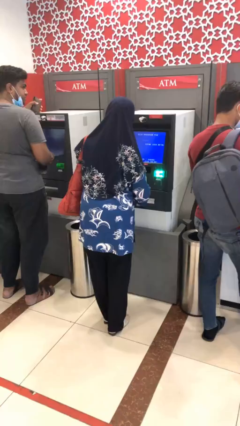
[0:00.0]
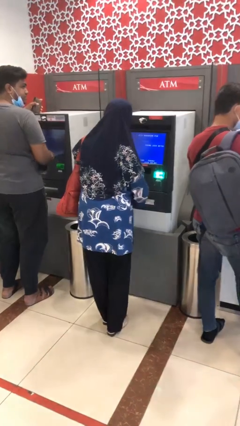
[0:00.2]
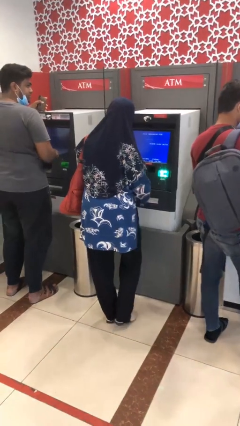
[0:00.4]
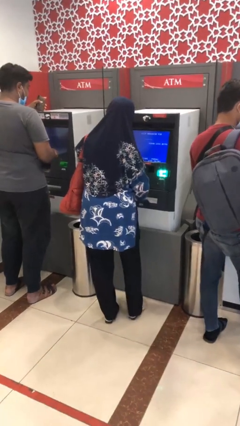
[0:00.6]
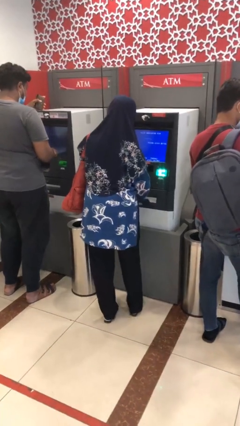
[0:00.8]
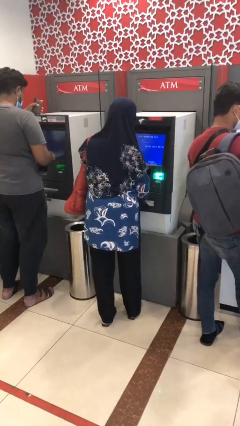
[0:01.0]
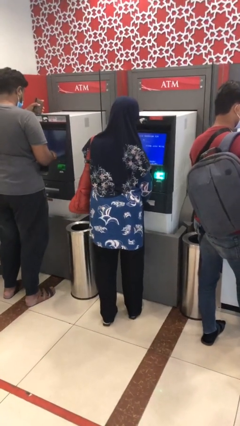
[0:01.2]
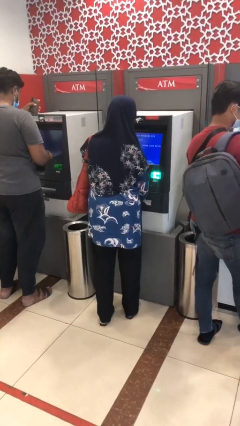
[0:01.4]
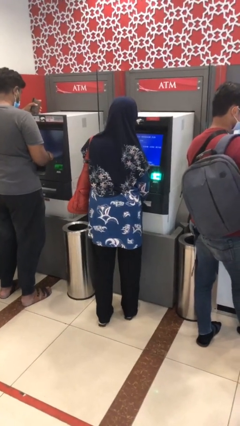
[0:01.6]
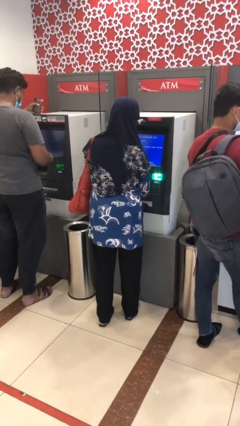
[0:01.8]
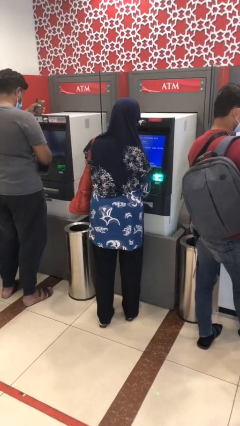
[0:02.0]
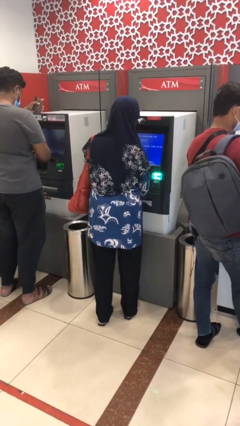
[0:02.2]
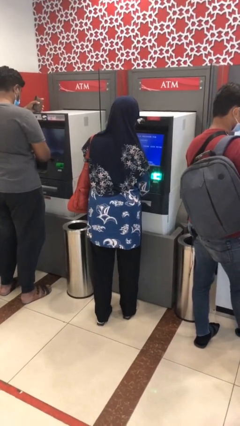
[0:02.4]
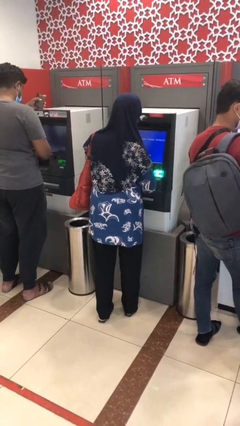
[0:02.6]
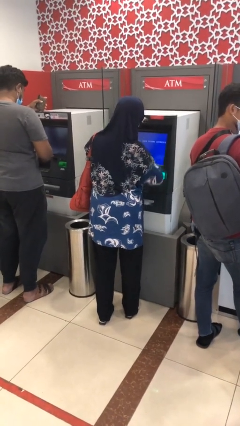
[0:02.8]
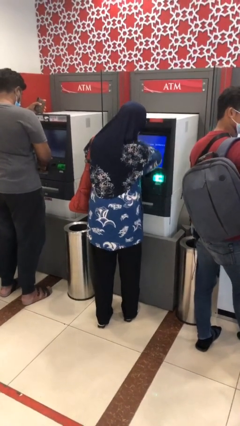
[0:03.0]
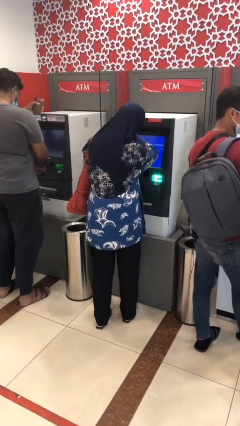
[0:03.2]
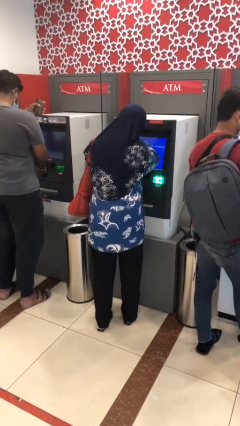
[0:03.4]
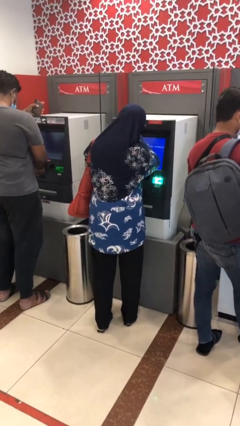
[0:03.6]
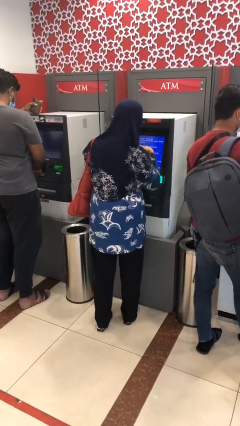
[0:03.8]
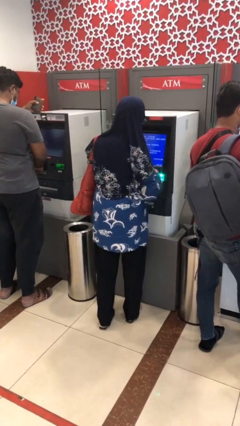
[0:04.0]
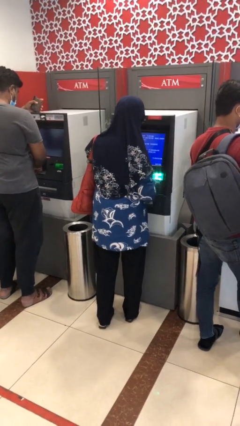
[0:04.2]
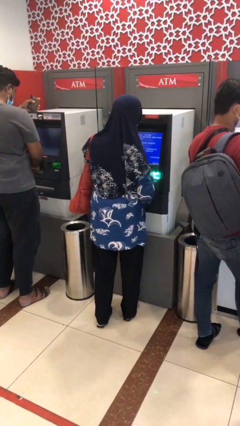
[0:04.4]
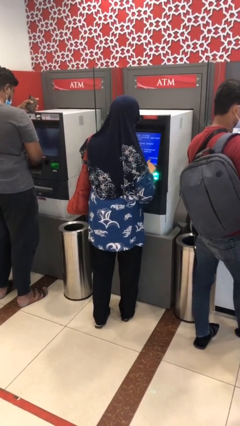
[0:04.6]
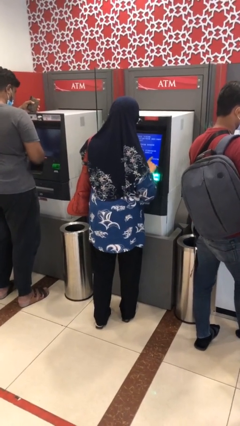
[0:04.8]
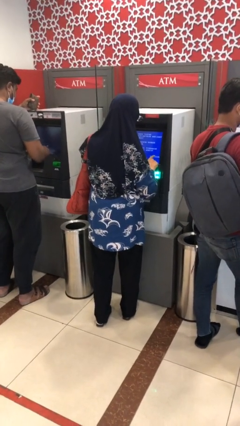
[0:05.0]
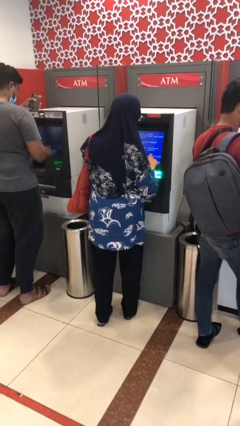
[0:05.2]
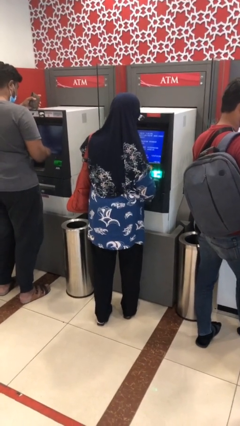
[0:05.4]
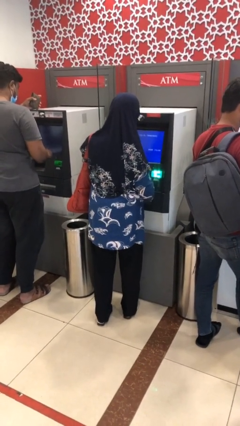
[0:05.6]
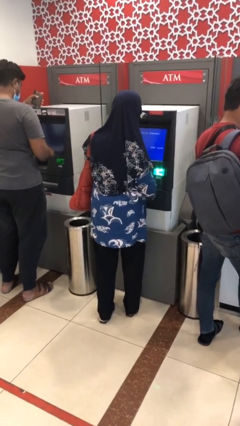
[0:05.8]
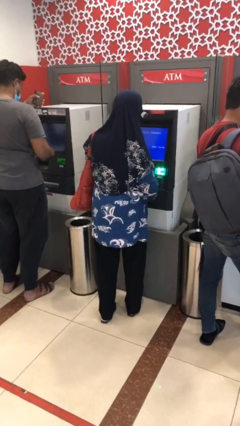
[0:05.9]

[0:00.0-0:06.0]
person purchases from machine

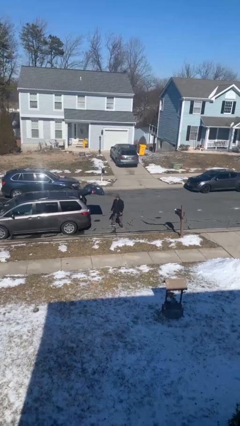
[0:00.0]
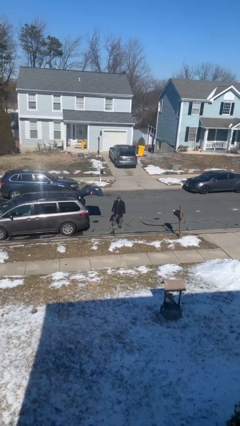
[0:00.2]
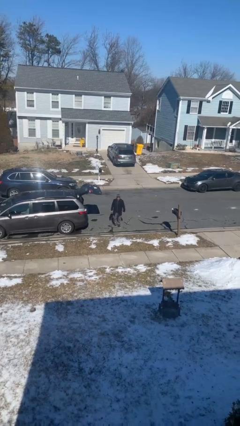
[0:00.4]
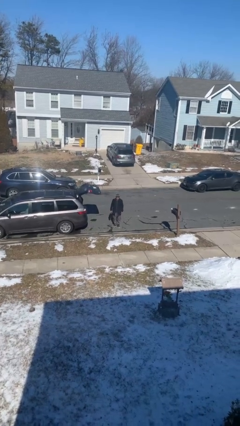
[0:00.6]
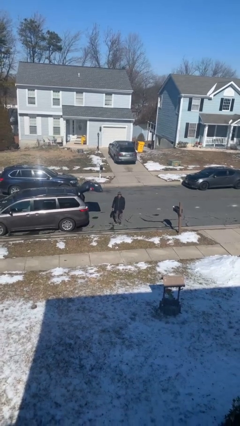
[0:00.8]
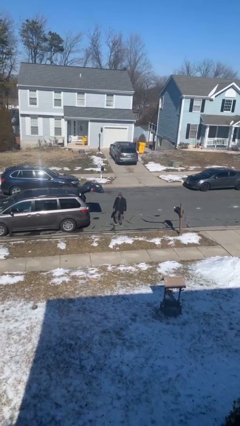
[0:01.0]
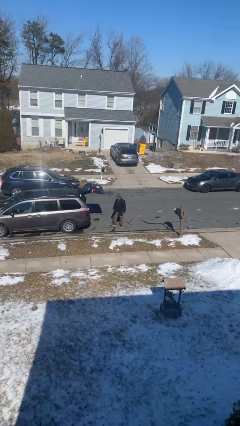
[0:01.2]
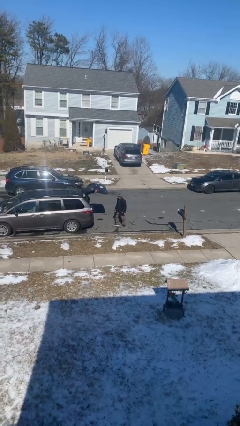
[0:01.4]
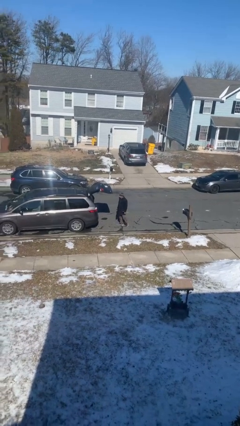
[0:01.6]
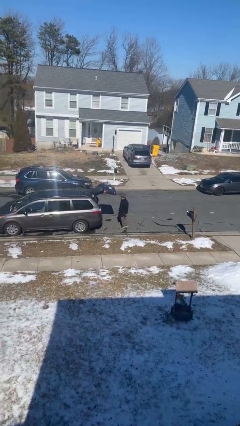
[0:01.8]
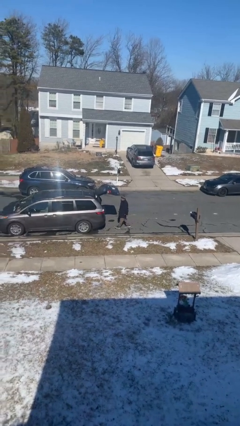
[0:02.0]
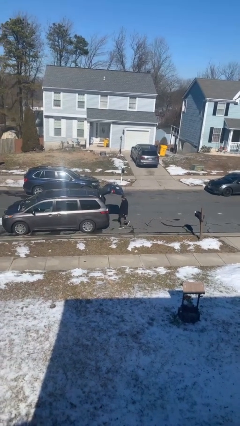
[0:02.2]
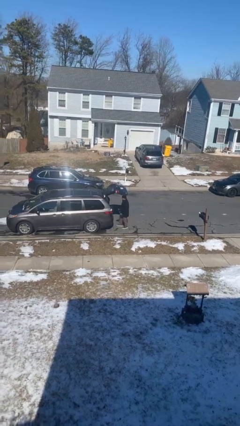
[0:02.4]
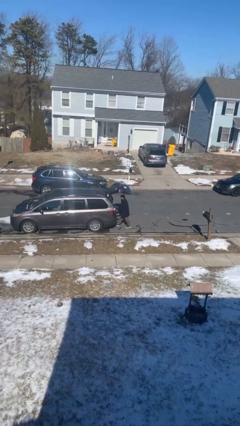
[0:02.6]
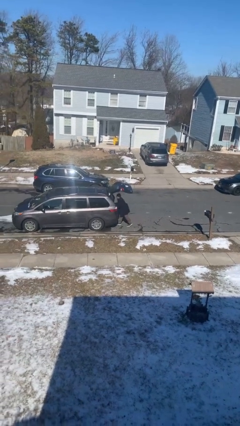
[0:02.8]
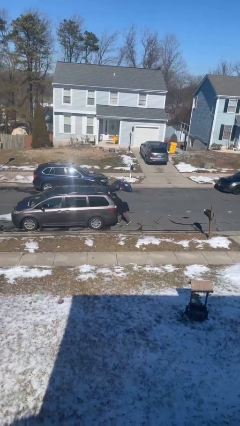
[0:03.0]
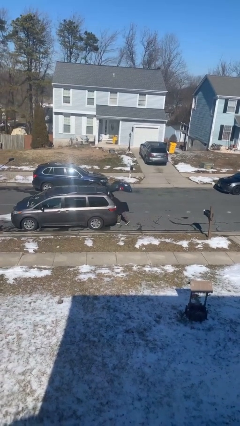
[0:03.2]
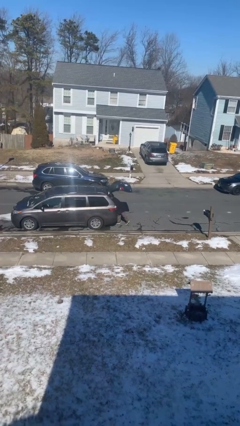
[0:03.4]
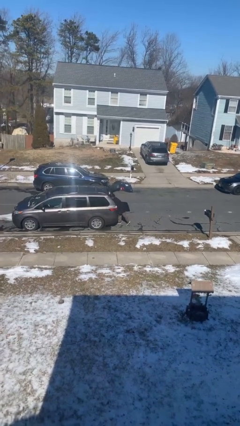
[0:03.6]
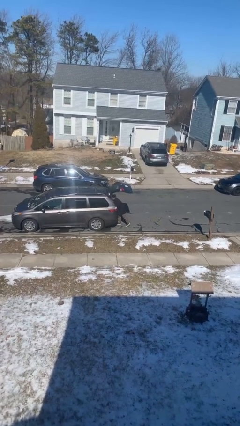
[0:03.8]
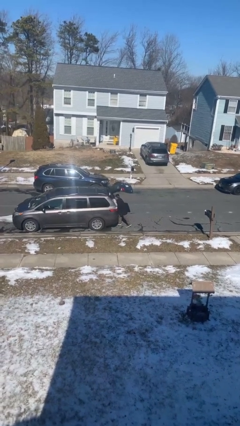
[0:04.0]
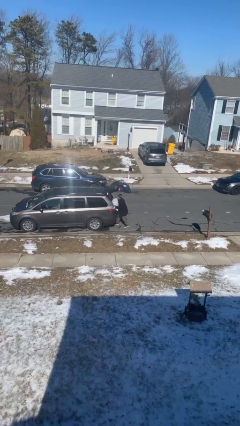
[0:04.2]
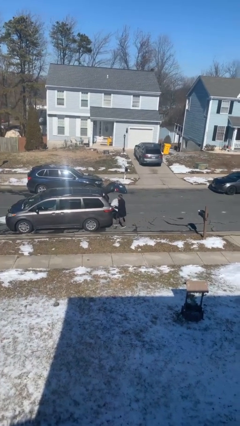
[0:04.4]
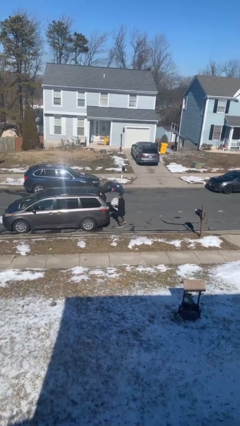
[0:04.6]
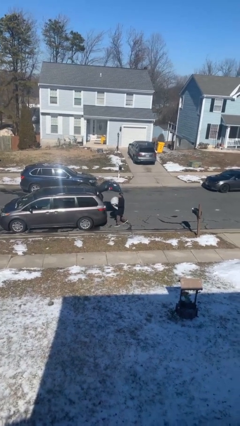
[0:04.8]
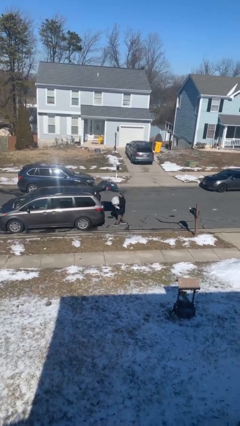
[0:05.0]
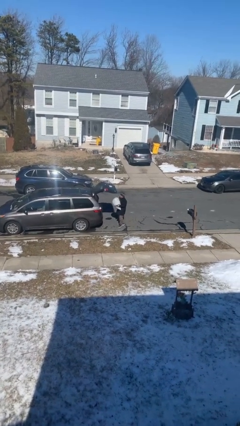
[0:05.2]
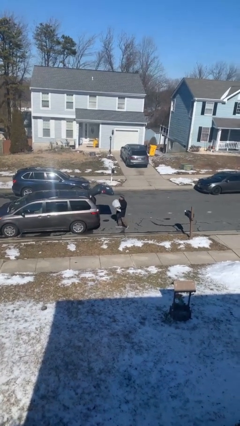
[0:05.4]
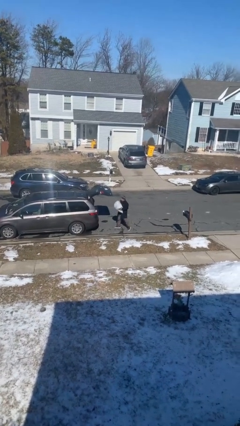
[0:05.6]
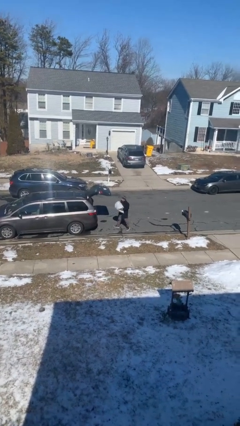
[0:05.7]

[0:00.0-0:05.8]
person unloads car

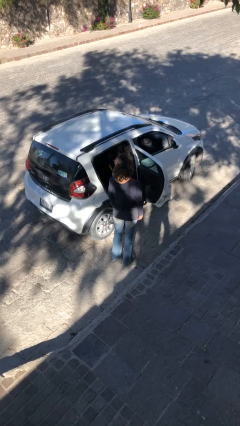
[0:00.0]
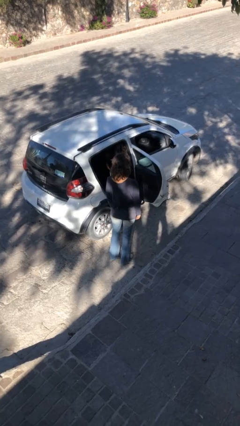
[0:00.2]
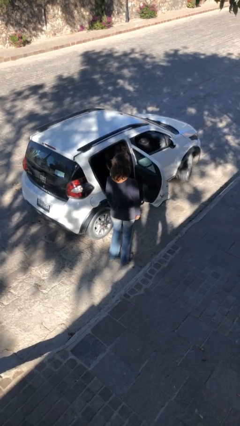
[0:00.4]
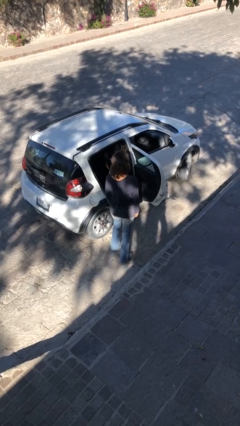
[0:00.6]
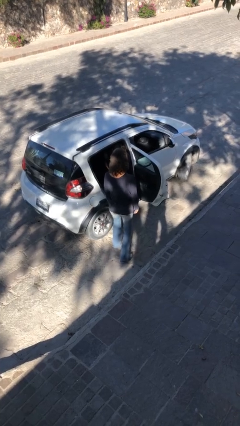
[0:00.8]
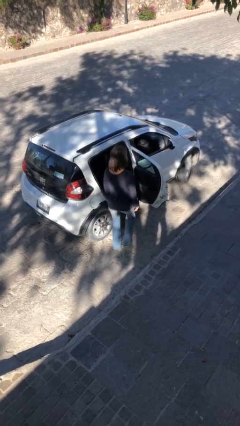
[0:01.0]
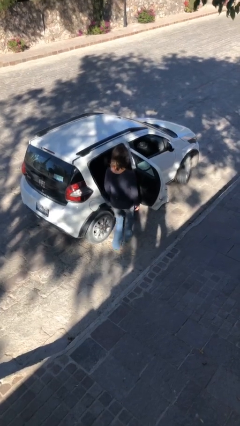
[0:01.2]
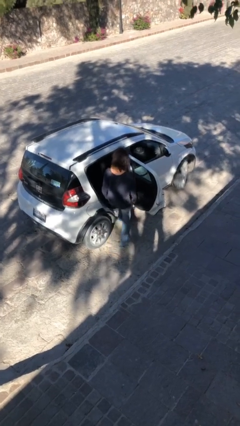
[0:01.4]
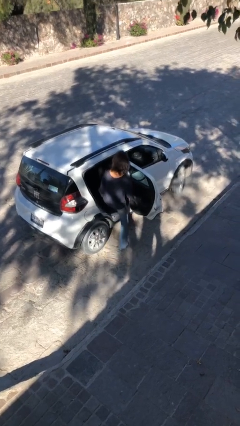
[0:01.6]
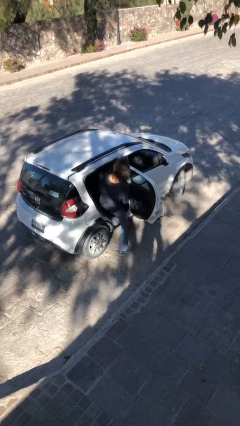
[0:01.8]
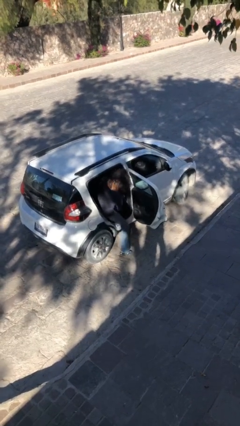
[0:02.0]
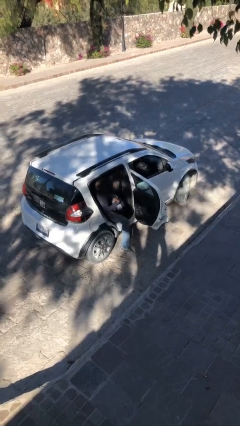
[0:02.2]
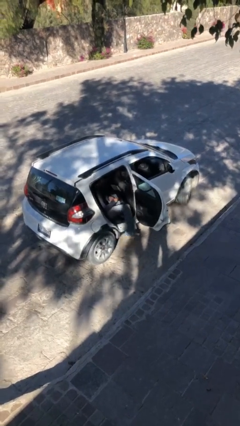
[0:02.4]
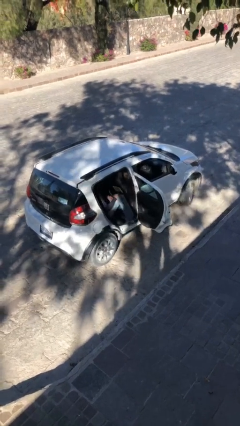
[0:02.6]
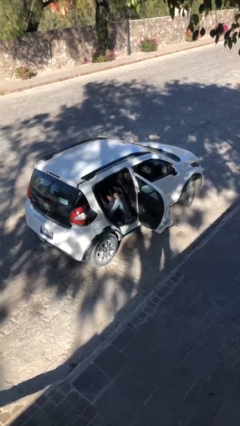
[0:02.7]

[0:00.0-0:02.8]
person enters car

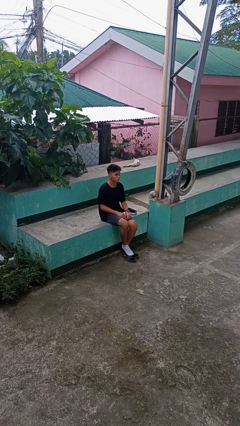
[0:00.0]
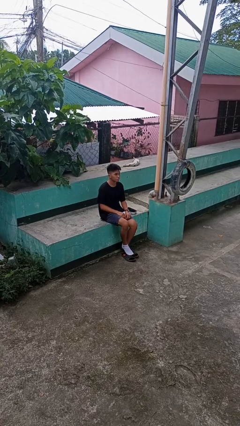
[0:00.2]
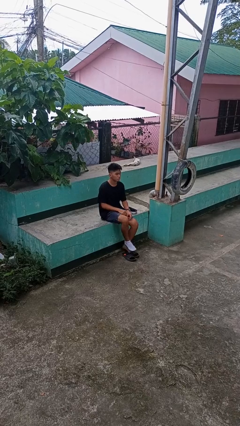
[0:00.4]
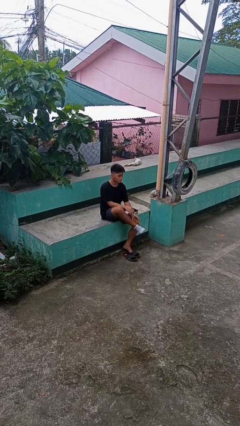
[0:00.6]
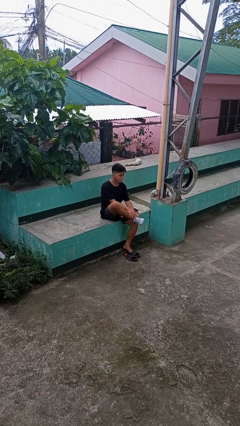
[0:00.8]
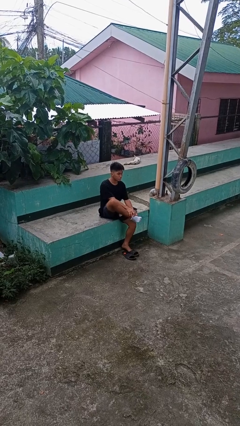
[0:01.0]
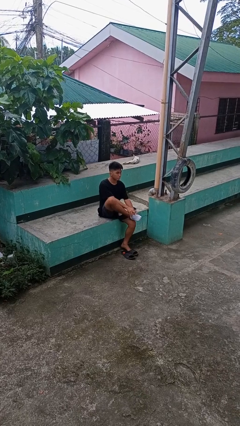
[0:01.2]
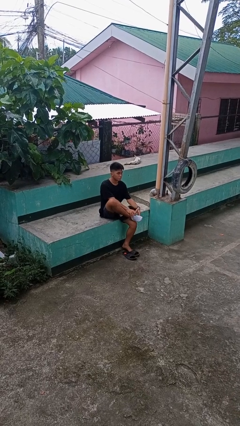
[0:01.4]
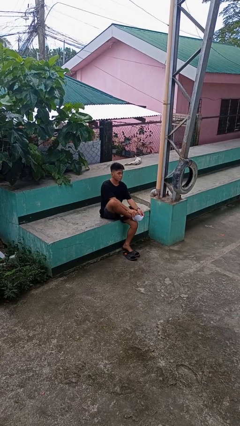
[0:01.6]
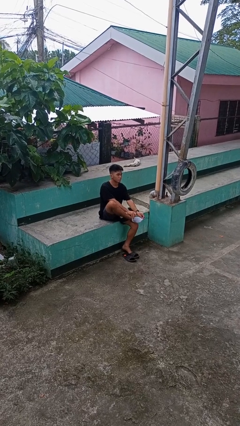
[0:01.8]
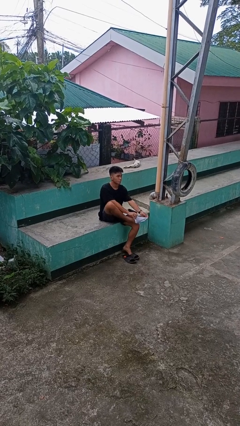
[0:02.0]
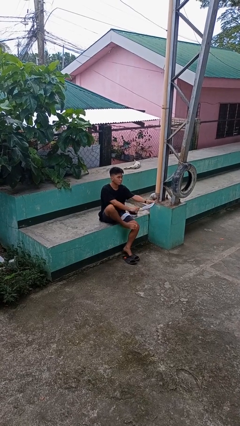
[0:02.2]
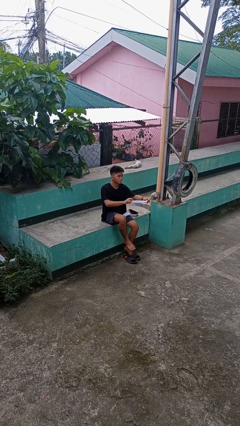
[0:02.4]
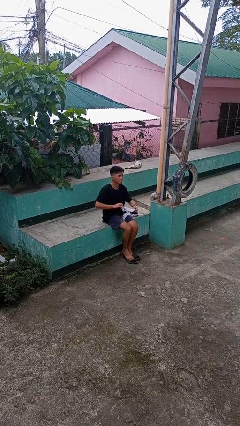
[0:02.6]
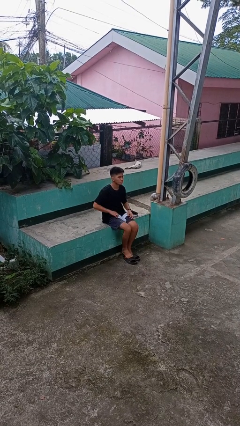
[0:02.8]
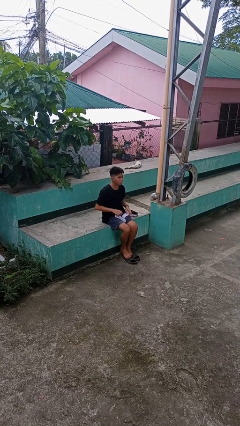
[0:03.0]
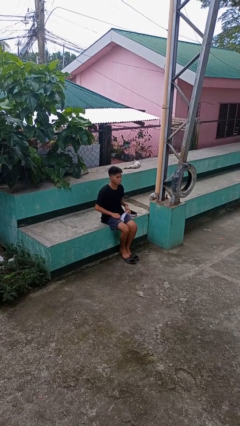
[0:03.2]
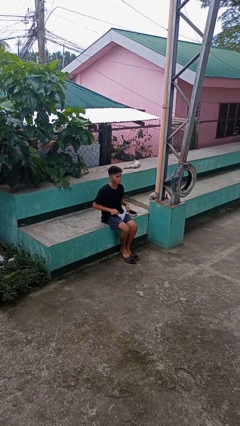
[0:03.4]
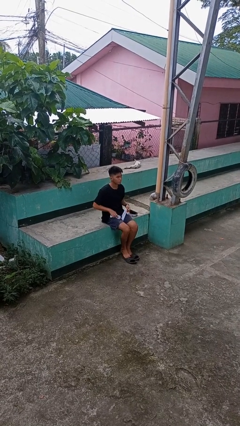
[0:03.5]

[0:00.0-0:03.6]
person takes off socks
